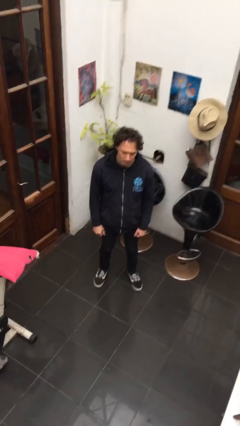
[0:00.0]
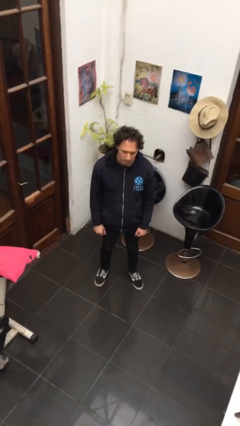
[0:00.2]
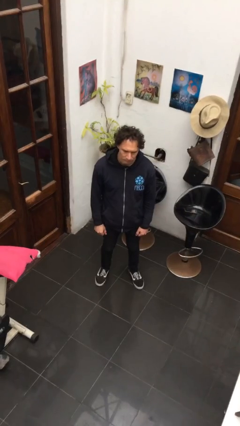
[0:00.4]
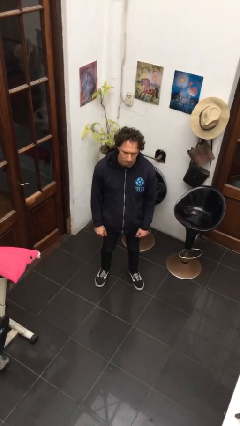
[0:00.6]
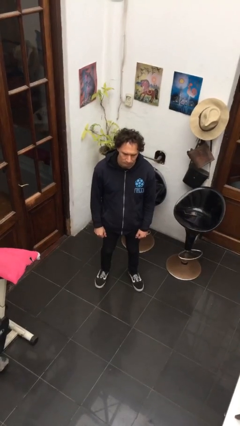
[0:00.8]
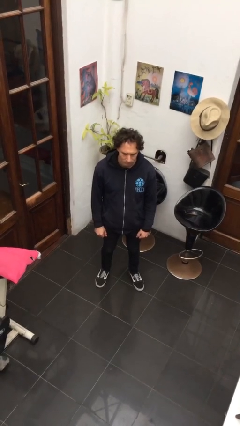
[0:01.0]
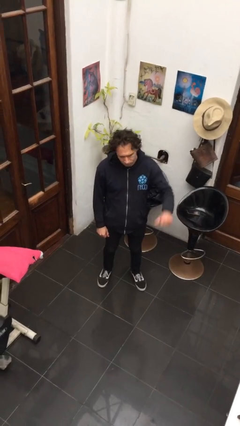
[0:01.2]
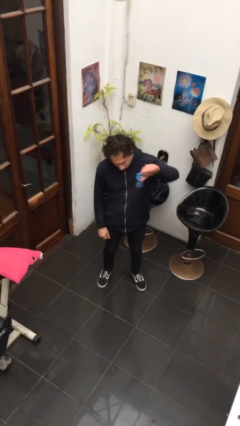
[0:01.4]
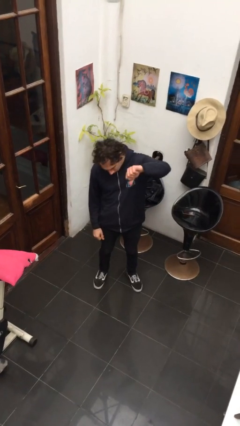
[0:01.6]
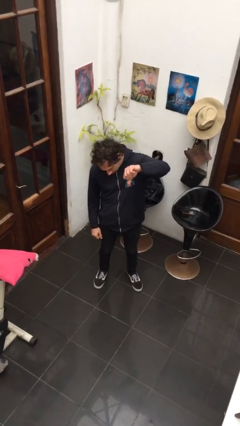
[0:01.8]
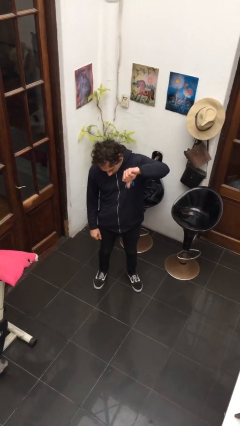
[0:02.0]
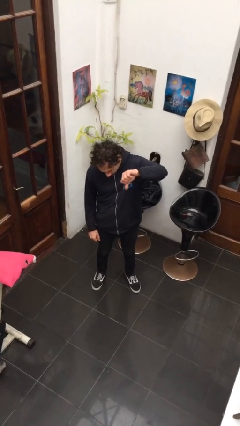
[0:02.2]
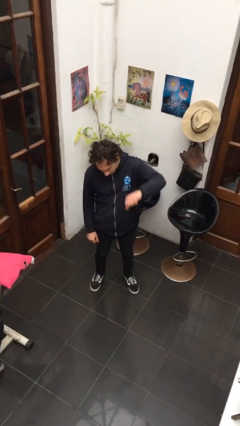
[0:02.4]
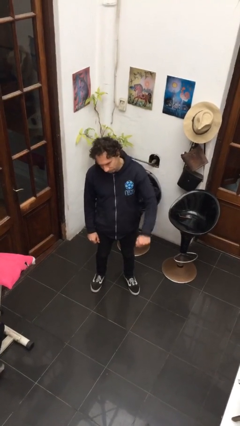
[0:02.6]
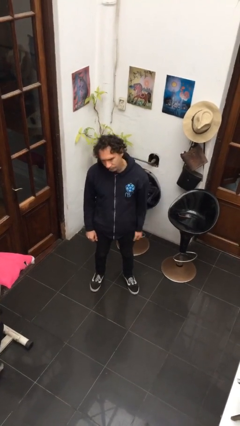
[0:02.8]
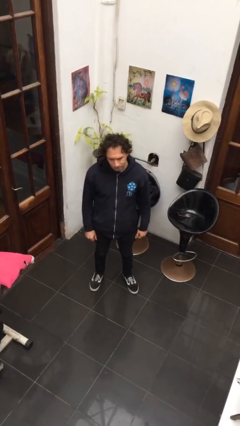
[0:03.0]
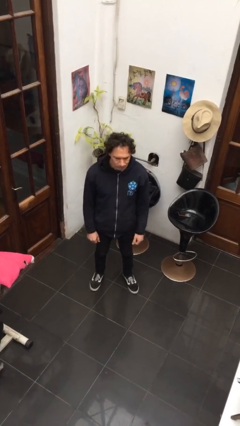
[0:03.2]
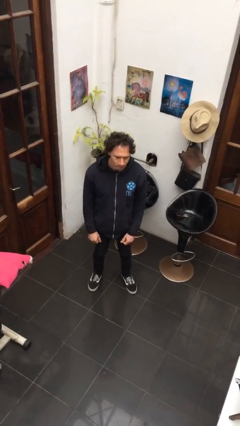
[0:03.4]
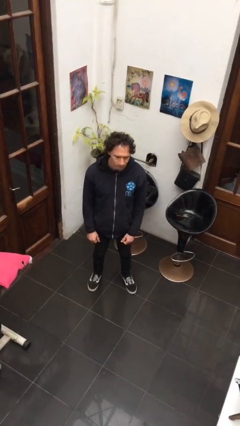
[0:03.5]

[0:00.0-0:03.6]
person gestures thumbs down

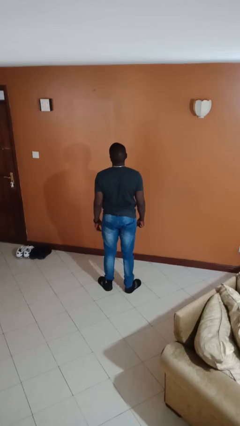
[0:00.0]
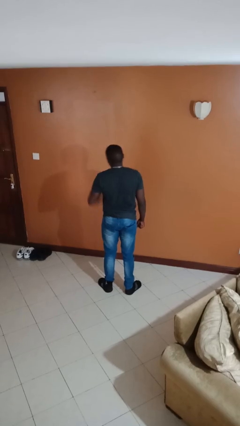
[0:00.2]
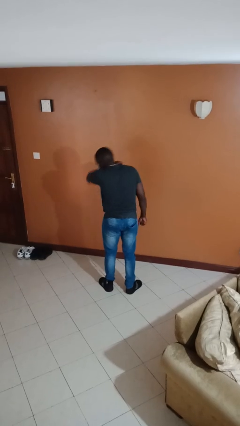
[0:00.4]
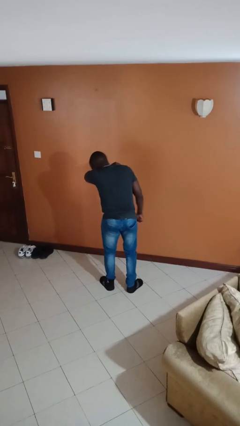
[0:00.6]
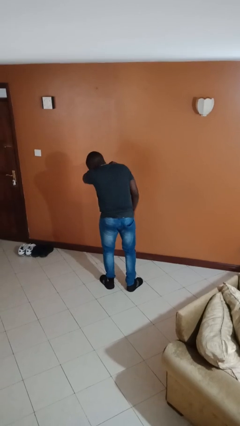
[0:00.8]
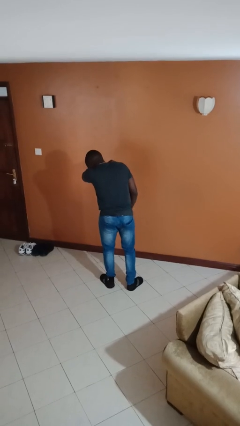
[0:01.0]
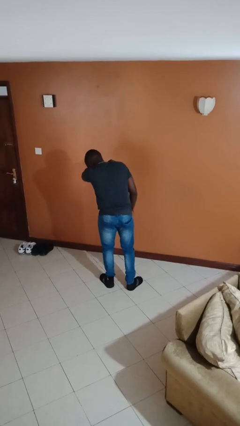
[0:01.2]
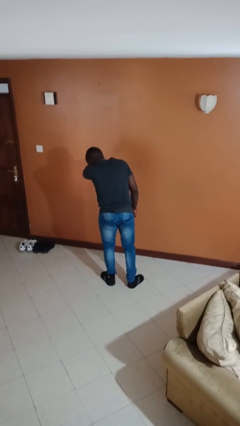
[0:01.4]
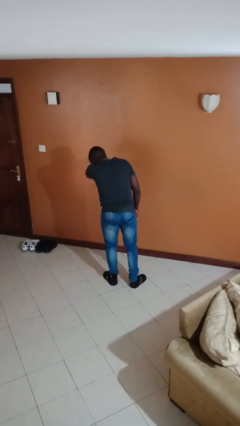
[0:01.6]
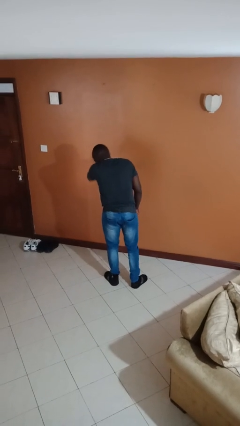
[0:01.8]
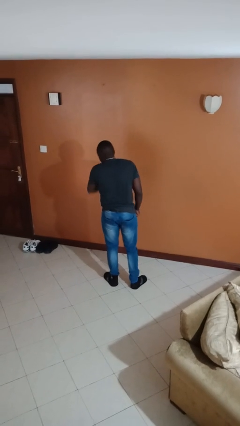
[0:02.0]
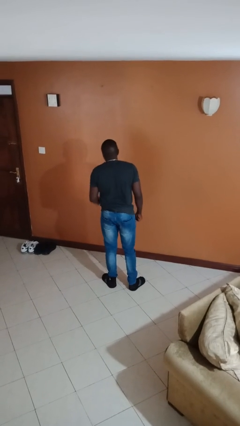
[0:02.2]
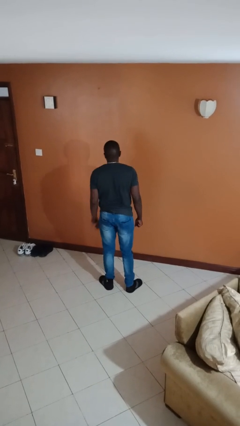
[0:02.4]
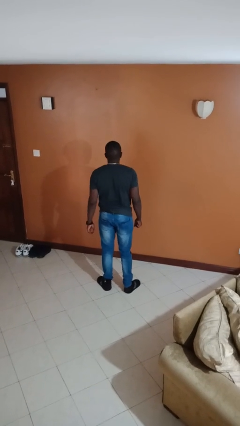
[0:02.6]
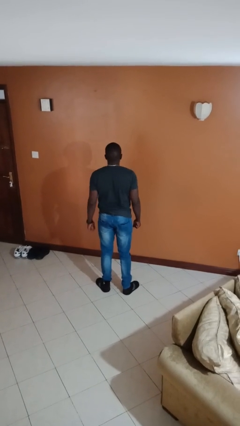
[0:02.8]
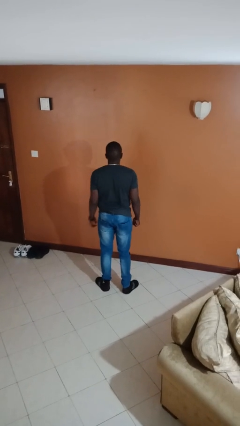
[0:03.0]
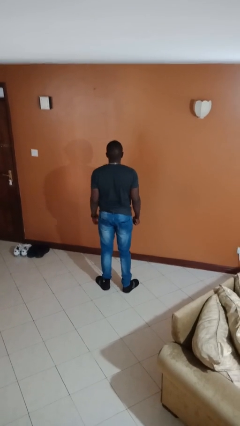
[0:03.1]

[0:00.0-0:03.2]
person sneezes into arm

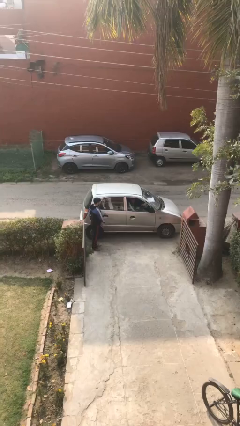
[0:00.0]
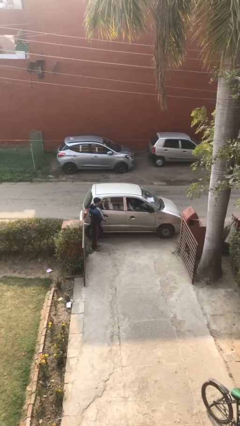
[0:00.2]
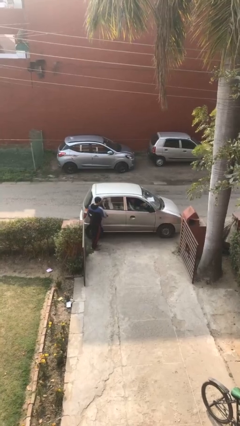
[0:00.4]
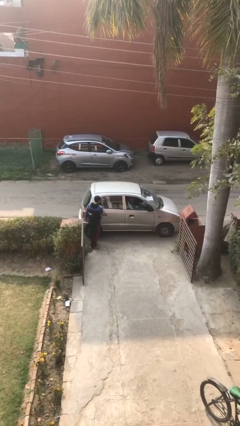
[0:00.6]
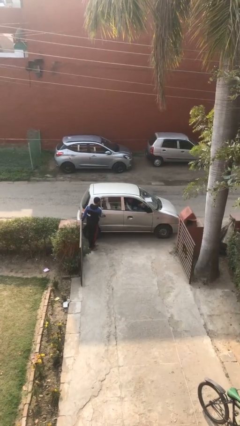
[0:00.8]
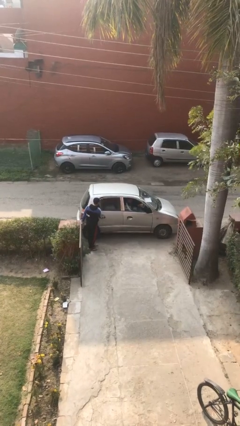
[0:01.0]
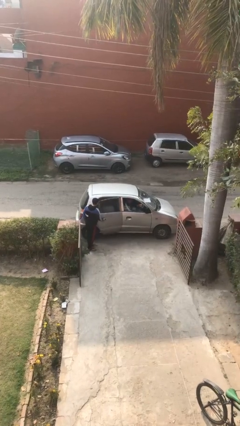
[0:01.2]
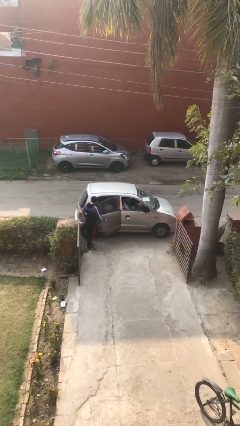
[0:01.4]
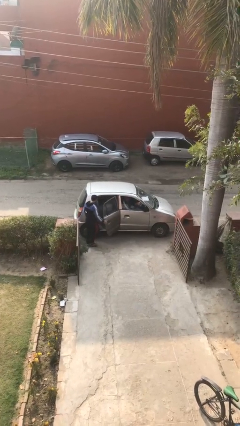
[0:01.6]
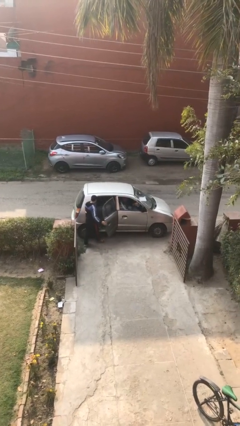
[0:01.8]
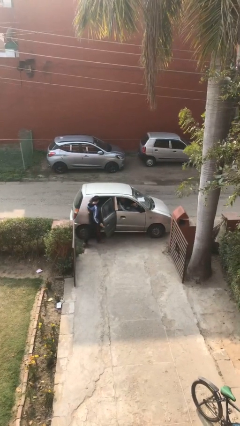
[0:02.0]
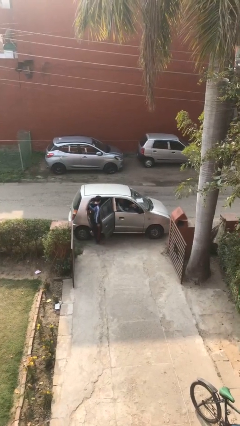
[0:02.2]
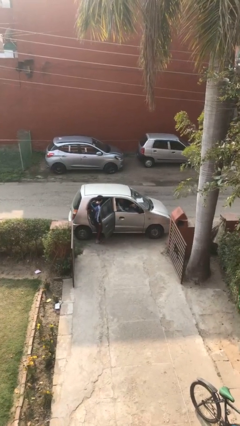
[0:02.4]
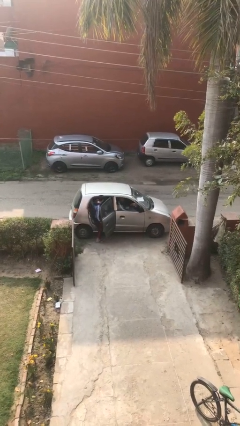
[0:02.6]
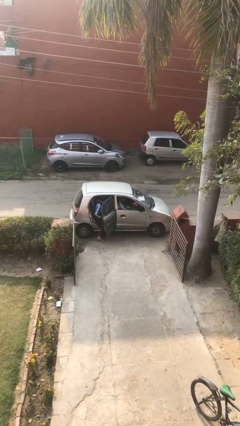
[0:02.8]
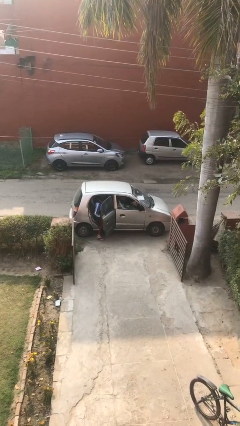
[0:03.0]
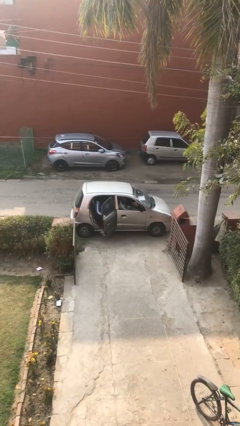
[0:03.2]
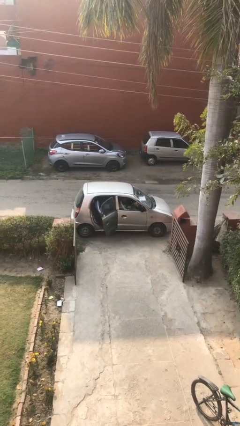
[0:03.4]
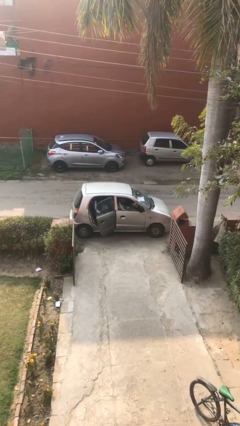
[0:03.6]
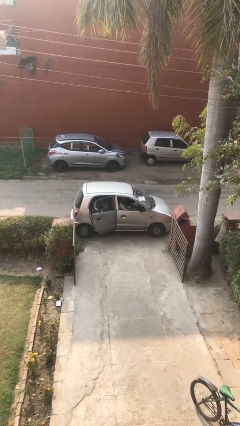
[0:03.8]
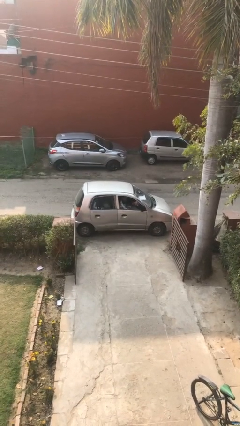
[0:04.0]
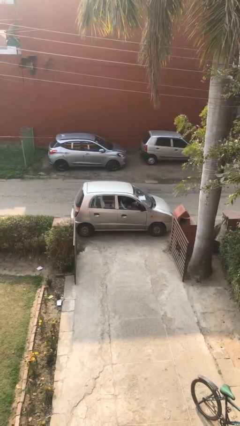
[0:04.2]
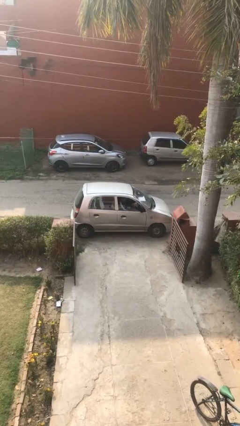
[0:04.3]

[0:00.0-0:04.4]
car picks up person

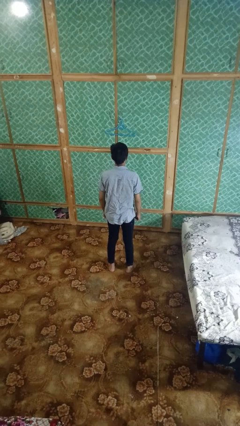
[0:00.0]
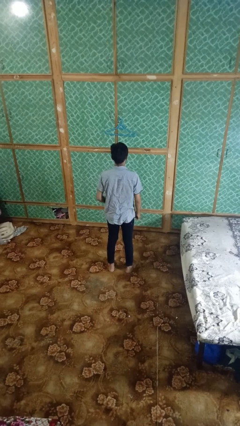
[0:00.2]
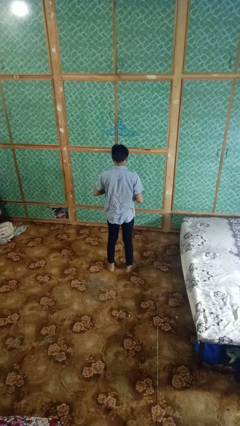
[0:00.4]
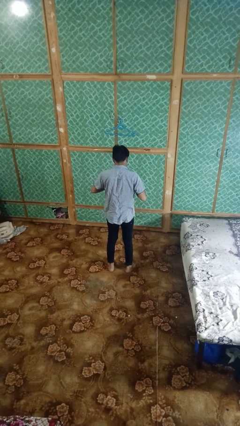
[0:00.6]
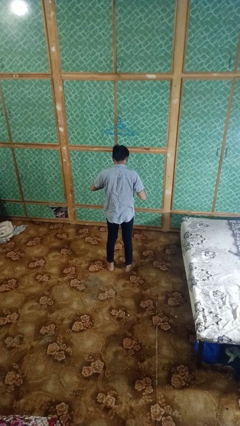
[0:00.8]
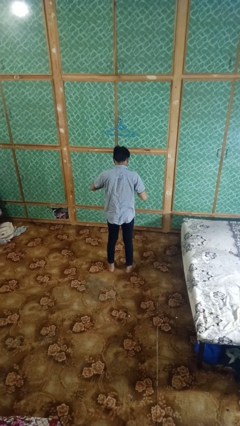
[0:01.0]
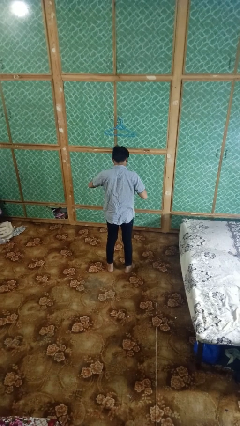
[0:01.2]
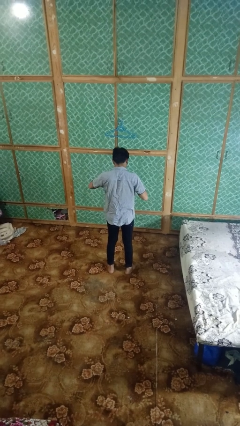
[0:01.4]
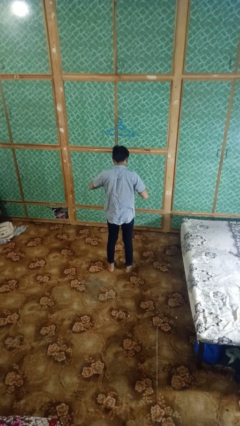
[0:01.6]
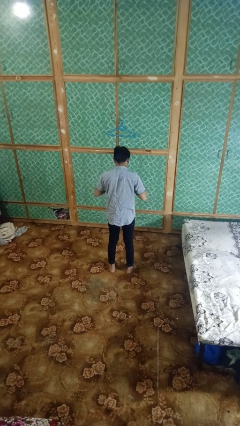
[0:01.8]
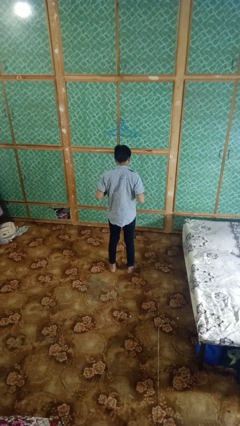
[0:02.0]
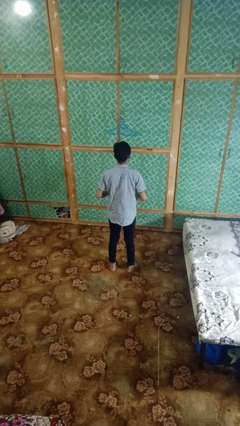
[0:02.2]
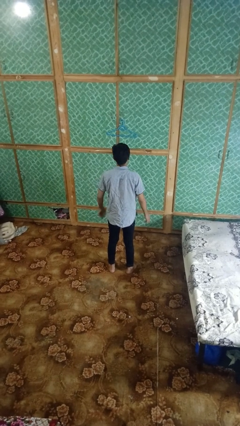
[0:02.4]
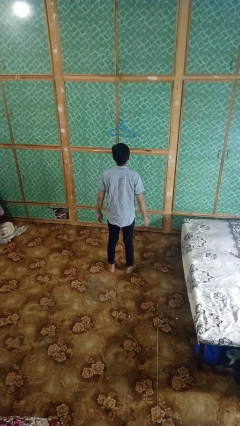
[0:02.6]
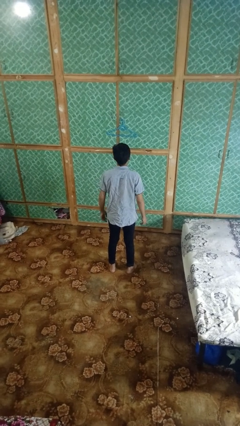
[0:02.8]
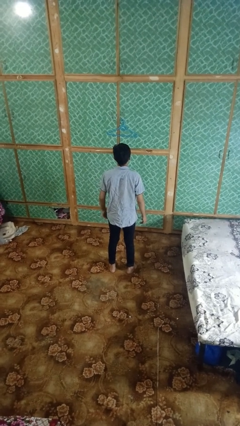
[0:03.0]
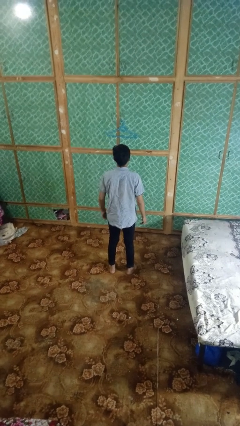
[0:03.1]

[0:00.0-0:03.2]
person unbuttons shirt

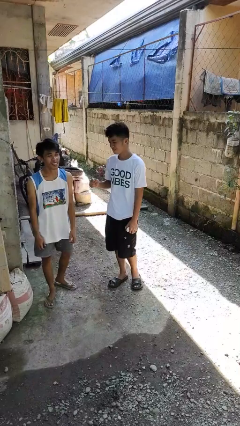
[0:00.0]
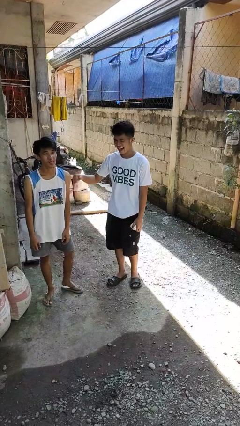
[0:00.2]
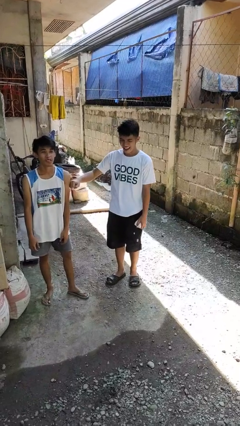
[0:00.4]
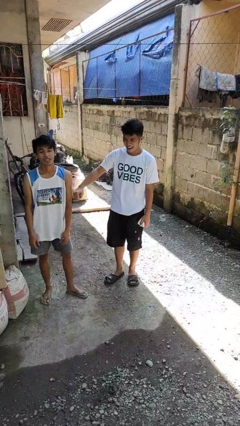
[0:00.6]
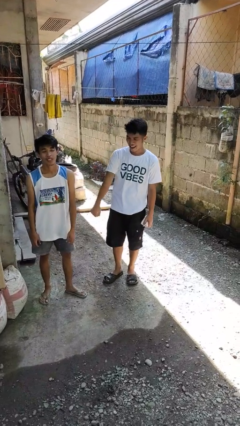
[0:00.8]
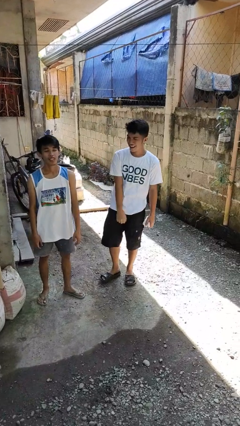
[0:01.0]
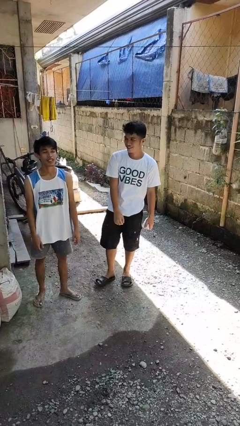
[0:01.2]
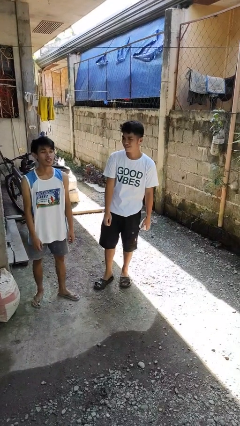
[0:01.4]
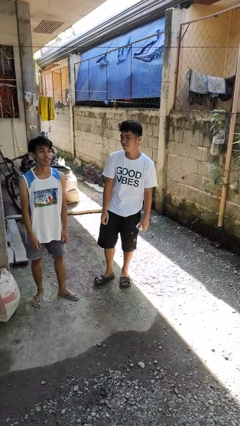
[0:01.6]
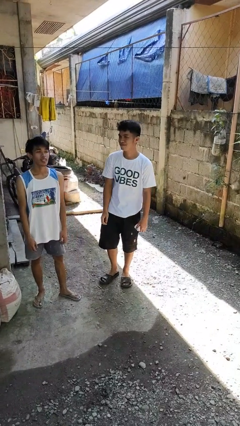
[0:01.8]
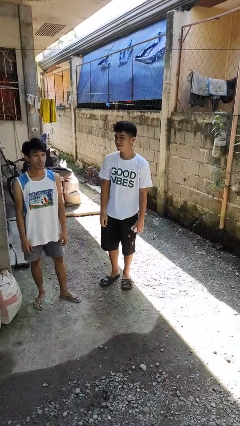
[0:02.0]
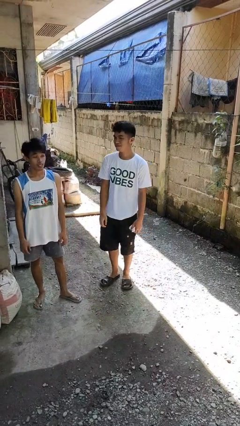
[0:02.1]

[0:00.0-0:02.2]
person pounds shoulders of person

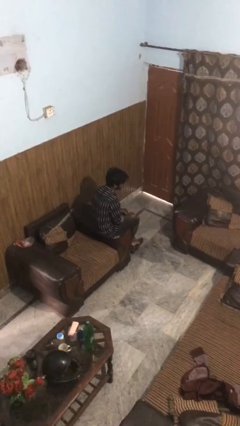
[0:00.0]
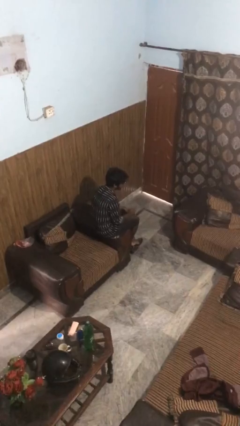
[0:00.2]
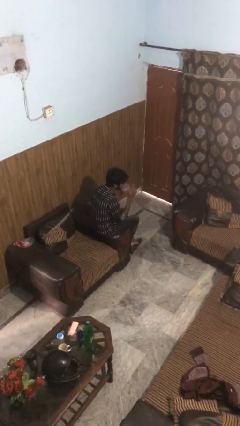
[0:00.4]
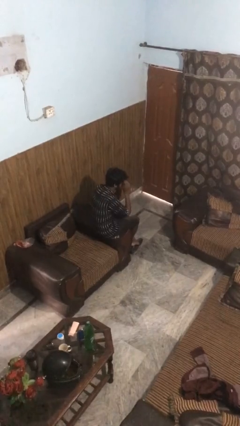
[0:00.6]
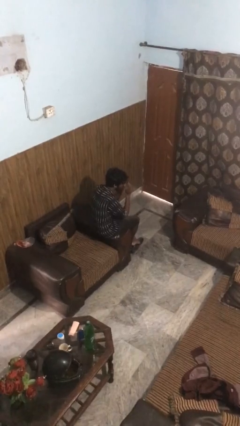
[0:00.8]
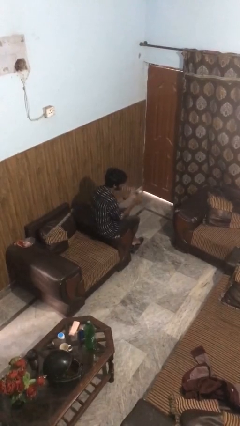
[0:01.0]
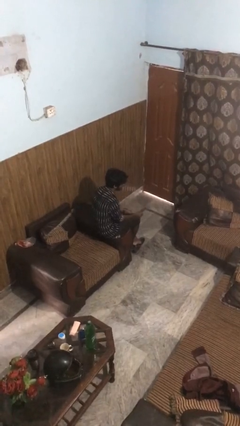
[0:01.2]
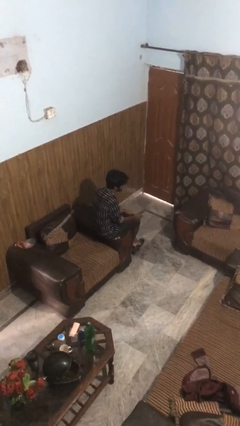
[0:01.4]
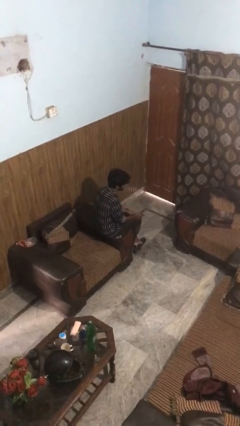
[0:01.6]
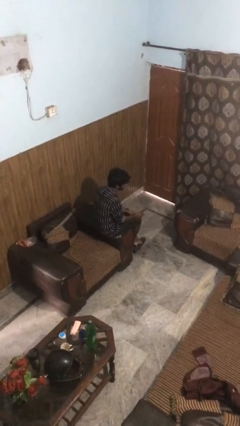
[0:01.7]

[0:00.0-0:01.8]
person takes off sunglasses
